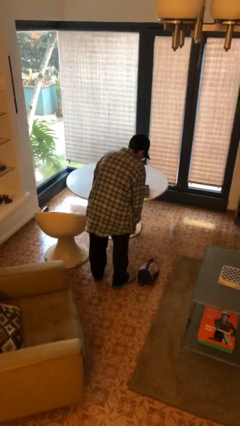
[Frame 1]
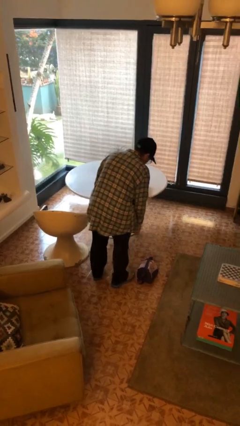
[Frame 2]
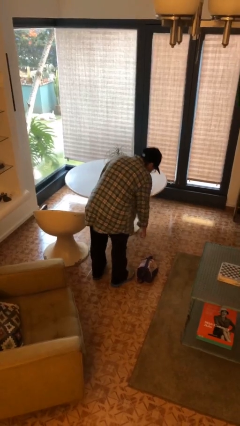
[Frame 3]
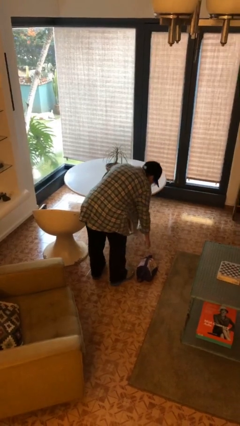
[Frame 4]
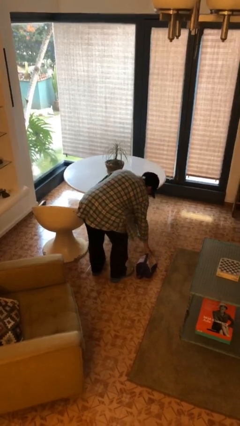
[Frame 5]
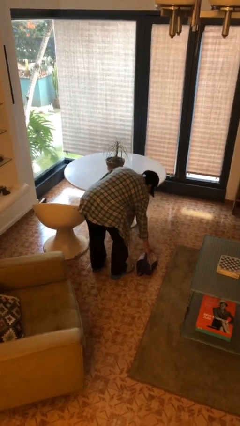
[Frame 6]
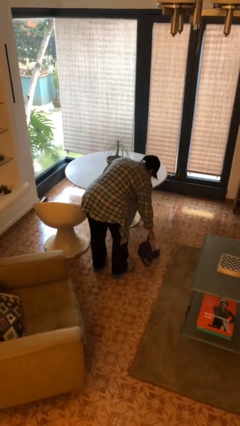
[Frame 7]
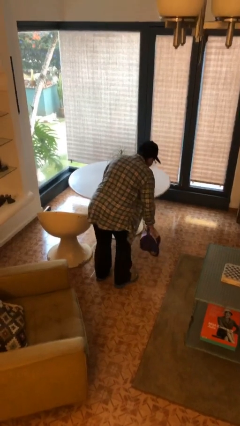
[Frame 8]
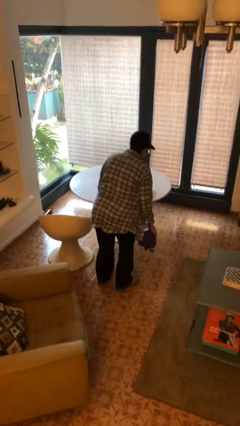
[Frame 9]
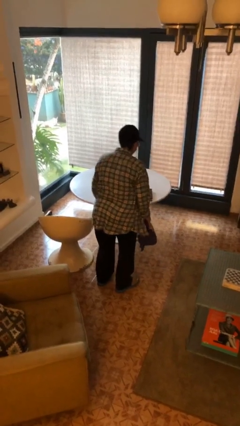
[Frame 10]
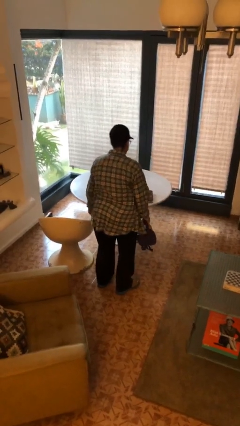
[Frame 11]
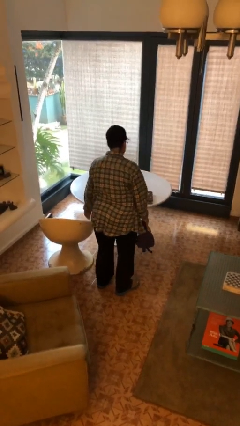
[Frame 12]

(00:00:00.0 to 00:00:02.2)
person picks up object from floor

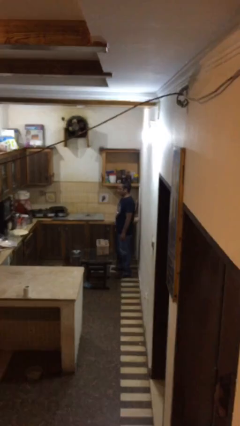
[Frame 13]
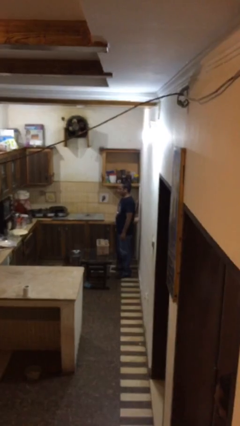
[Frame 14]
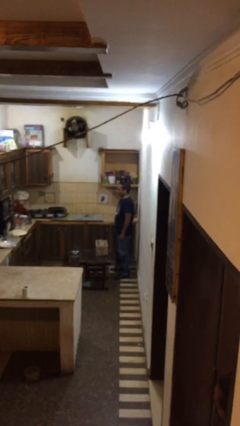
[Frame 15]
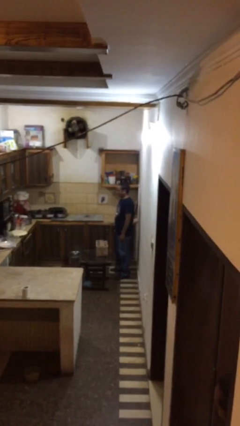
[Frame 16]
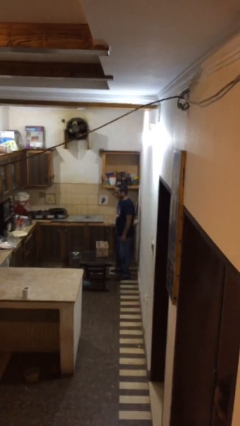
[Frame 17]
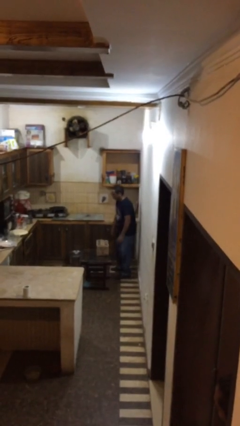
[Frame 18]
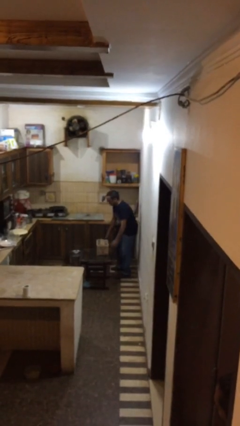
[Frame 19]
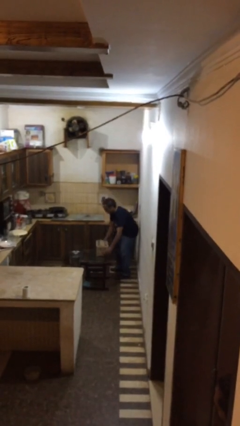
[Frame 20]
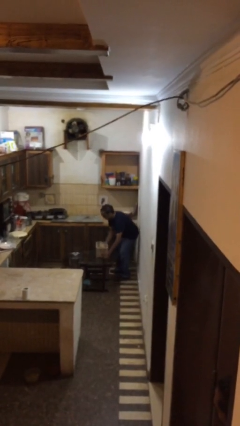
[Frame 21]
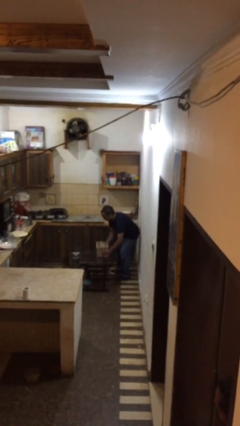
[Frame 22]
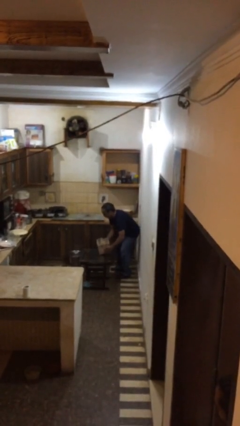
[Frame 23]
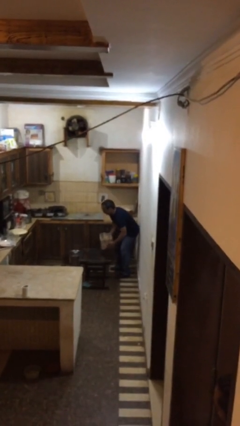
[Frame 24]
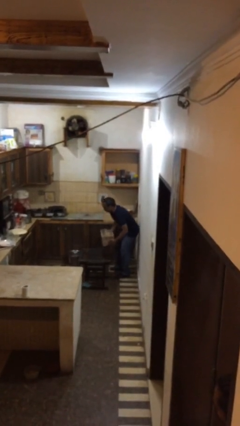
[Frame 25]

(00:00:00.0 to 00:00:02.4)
person picks up object from table

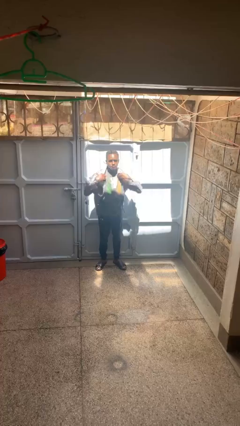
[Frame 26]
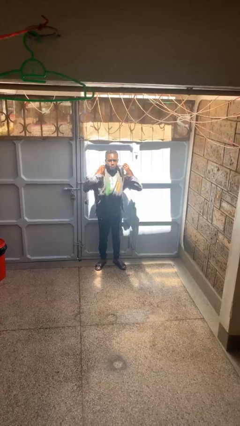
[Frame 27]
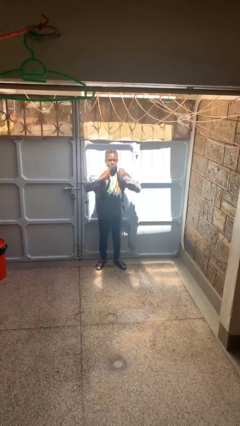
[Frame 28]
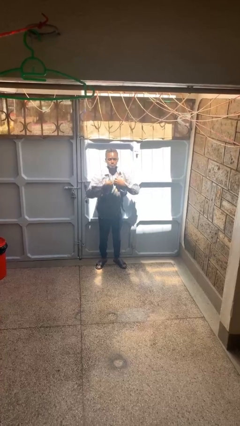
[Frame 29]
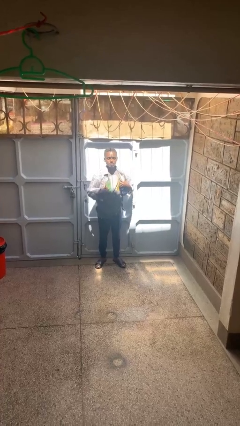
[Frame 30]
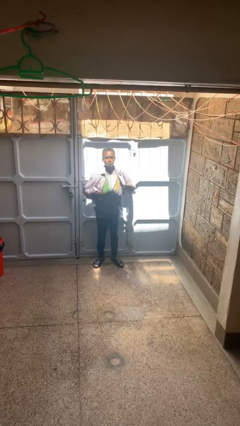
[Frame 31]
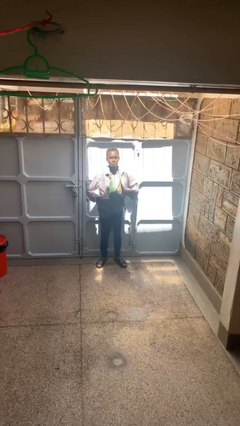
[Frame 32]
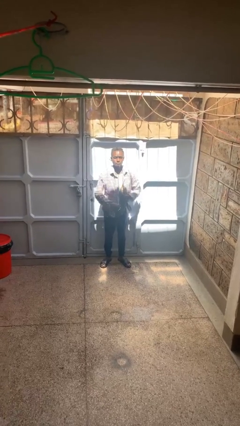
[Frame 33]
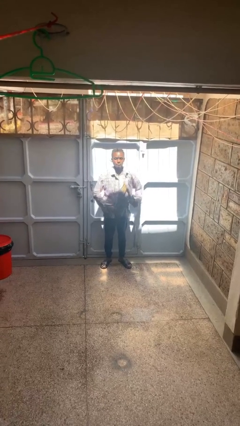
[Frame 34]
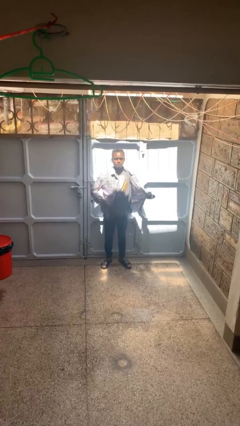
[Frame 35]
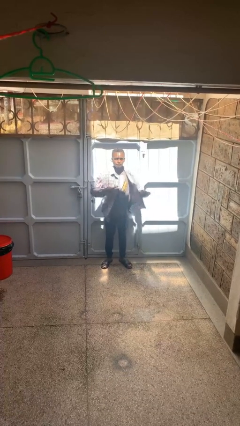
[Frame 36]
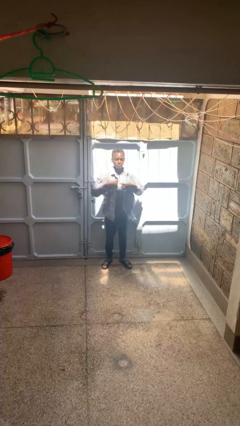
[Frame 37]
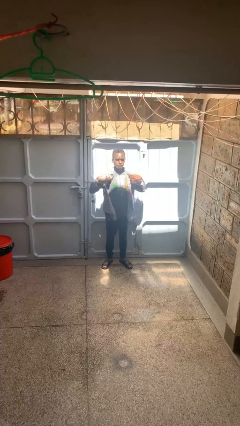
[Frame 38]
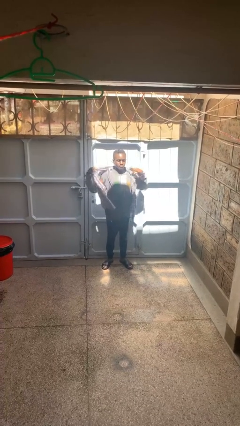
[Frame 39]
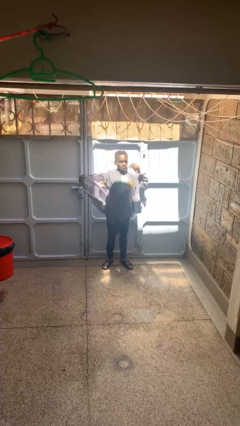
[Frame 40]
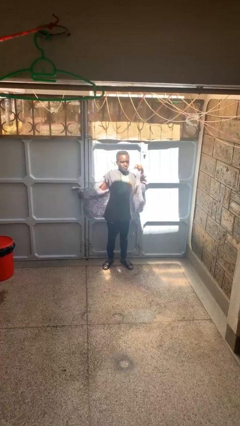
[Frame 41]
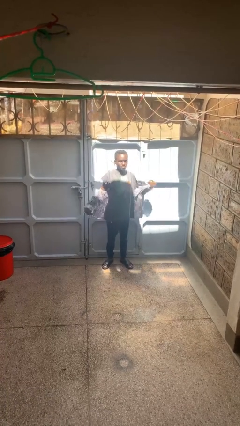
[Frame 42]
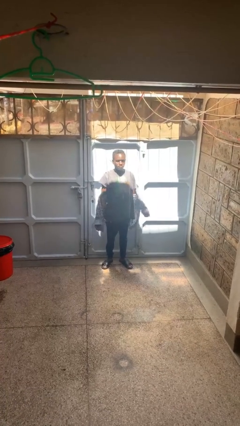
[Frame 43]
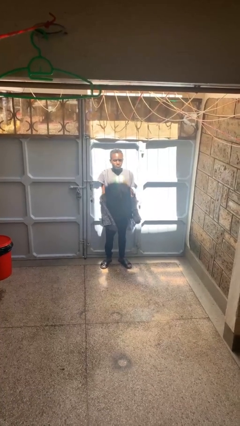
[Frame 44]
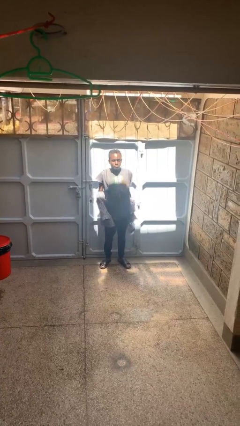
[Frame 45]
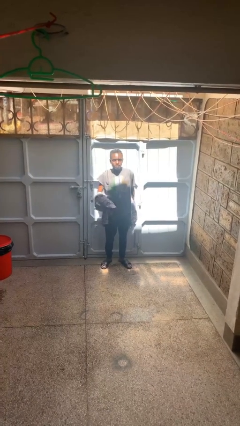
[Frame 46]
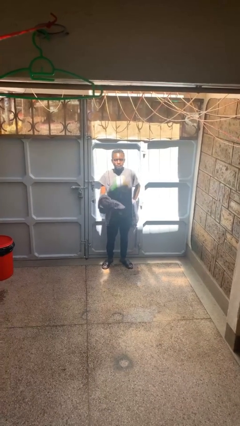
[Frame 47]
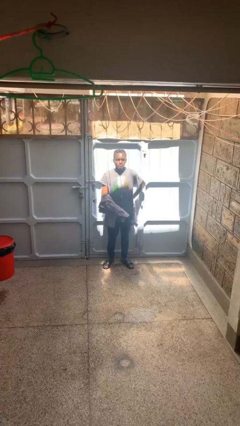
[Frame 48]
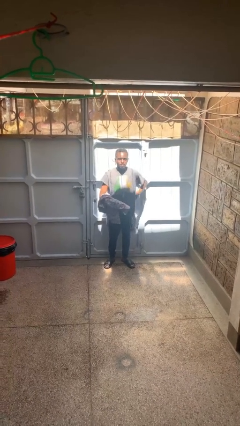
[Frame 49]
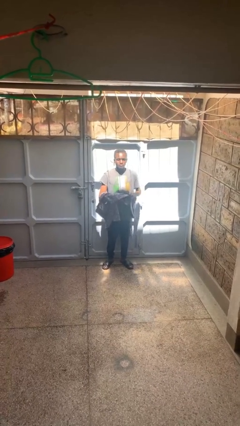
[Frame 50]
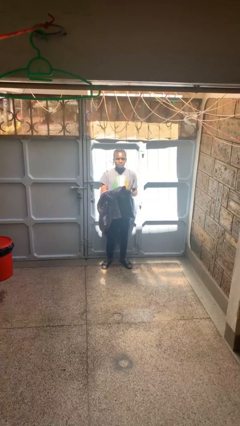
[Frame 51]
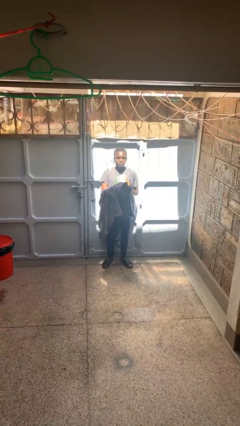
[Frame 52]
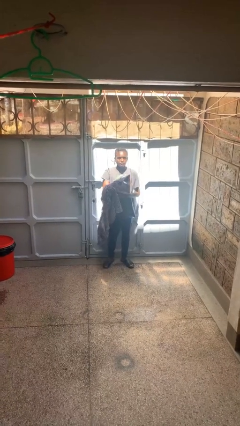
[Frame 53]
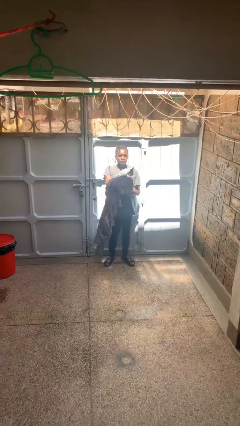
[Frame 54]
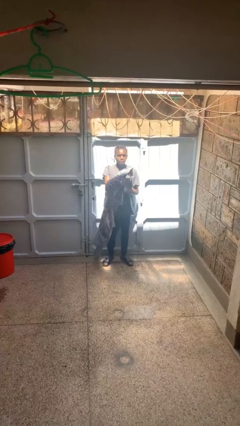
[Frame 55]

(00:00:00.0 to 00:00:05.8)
person takes off shirt

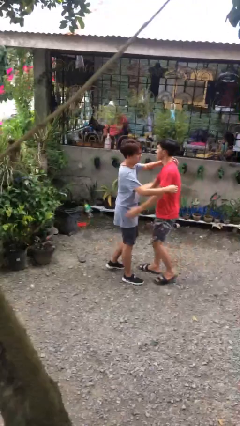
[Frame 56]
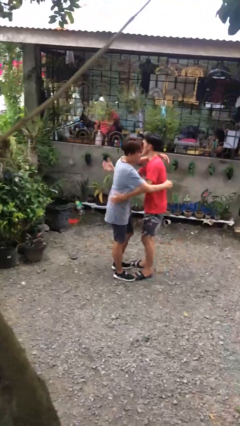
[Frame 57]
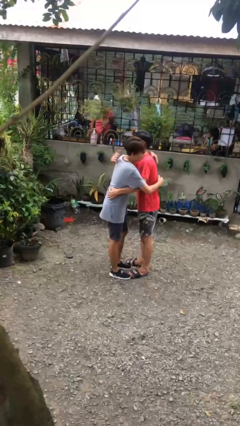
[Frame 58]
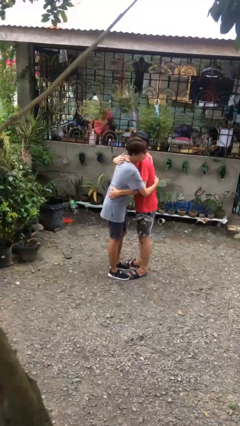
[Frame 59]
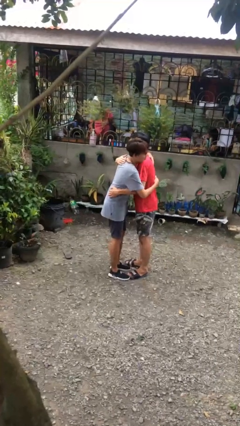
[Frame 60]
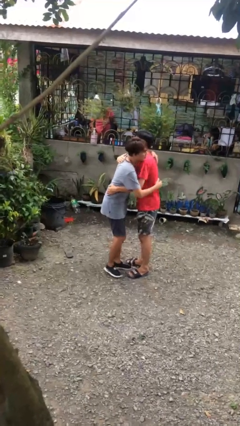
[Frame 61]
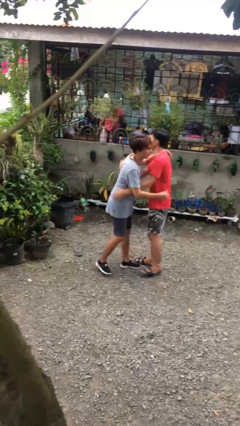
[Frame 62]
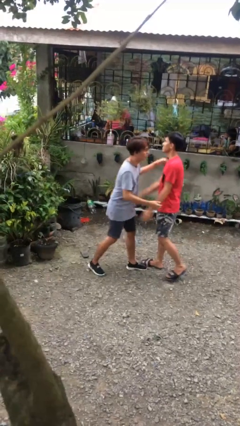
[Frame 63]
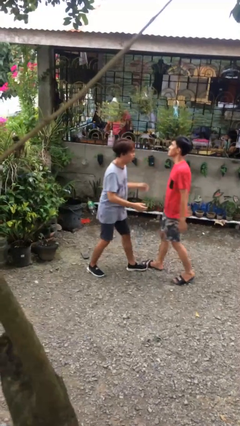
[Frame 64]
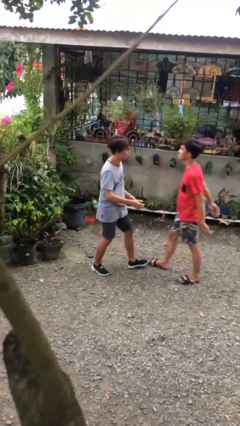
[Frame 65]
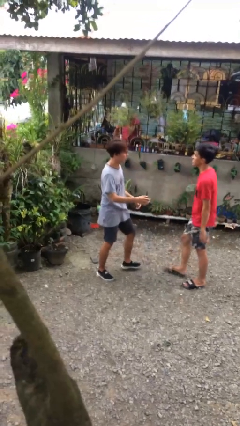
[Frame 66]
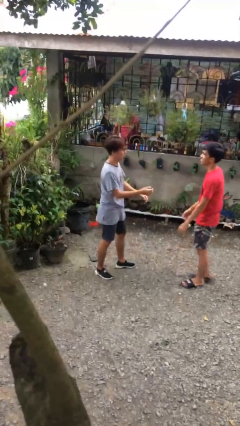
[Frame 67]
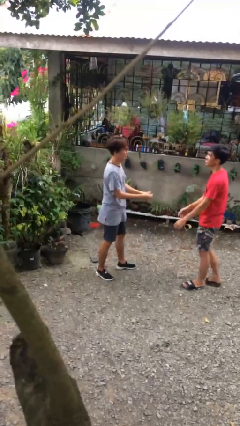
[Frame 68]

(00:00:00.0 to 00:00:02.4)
person embraces person

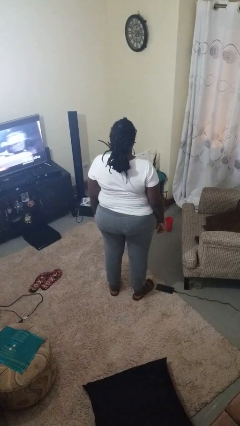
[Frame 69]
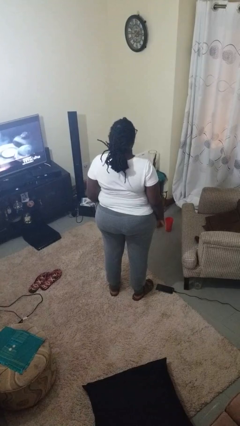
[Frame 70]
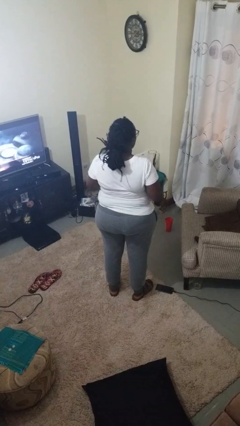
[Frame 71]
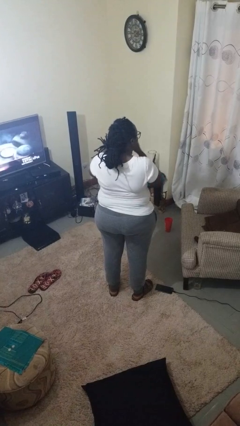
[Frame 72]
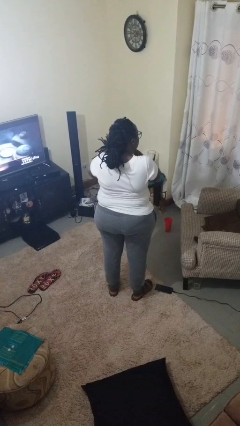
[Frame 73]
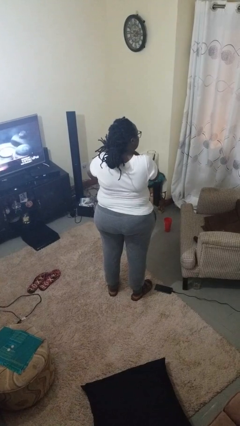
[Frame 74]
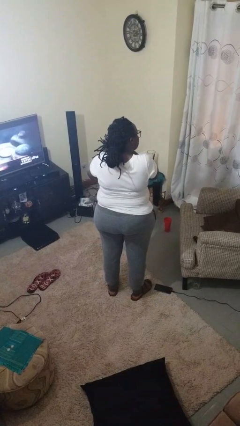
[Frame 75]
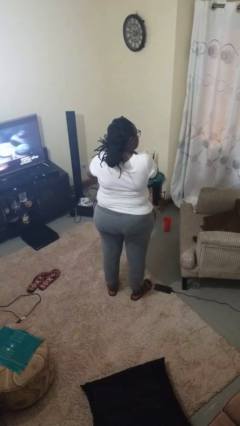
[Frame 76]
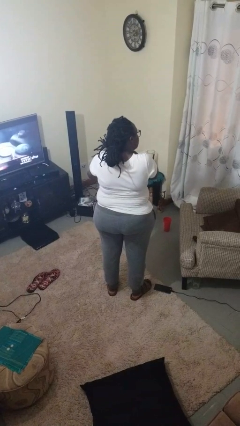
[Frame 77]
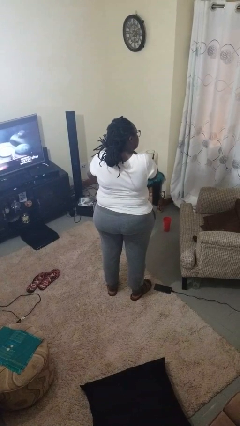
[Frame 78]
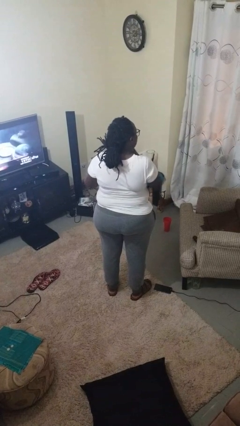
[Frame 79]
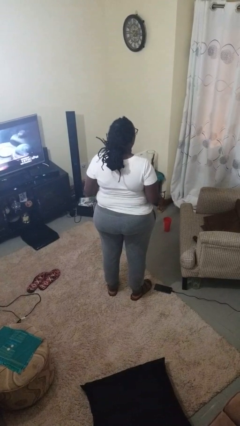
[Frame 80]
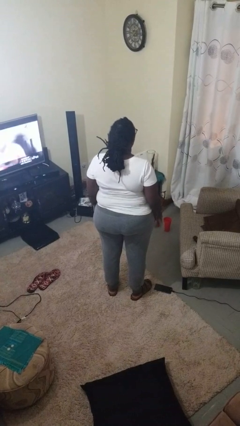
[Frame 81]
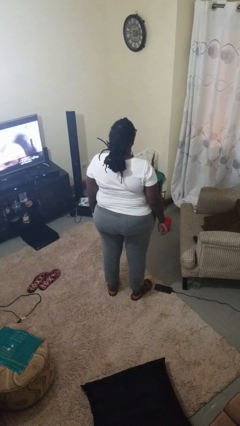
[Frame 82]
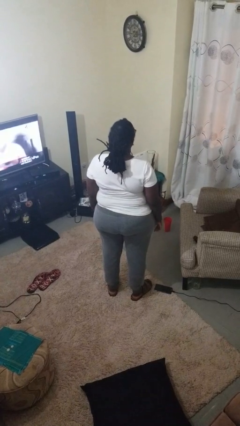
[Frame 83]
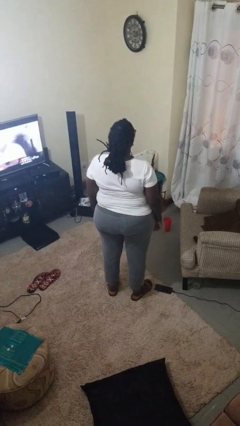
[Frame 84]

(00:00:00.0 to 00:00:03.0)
person takes off earrings

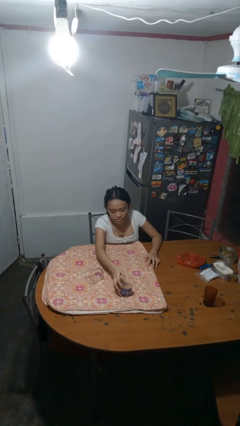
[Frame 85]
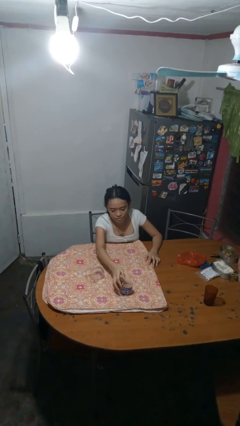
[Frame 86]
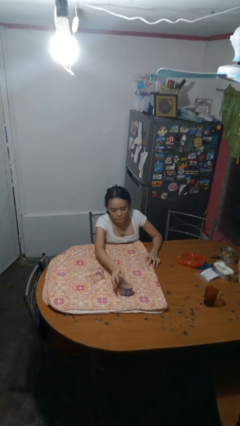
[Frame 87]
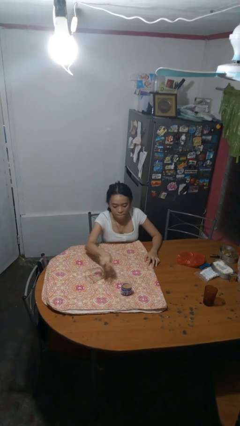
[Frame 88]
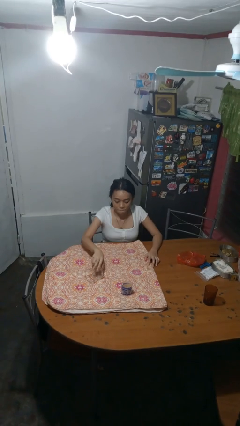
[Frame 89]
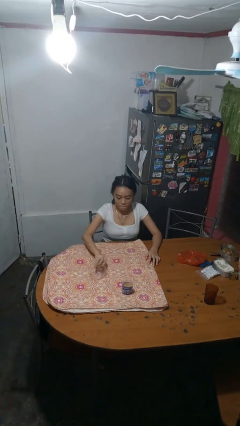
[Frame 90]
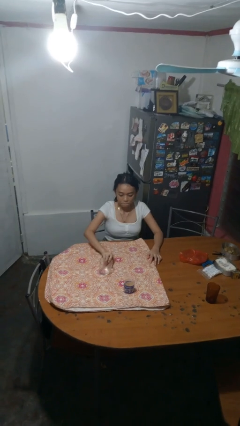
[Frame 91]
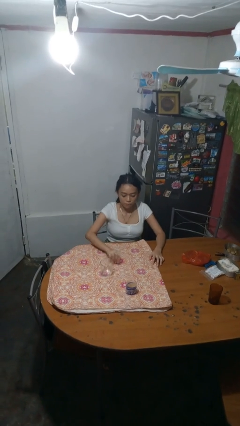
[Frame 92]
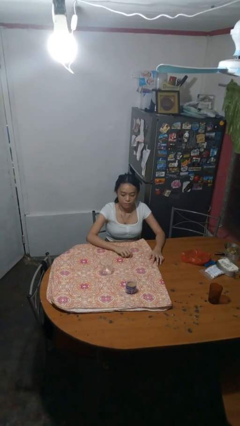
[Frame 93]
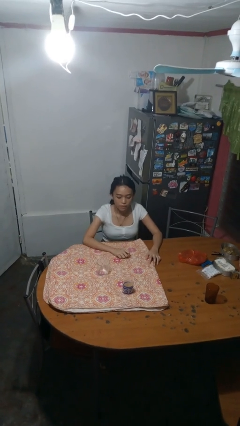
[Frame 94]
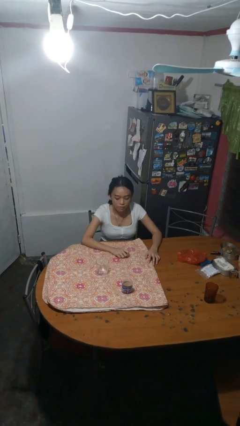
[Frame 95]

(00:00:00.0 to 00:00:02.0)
person sets upright glass
